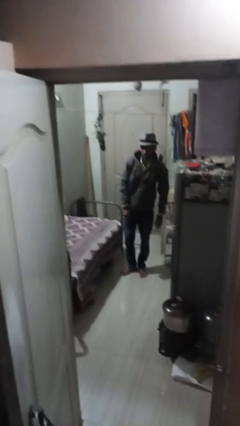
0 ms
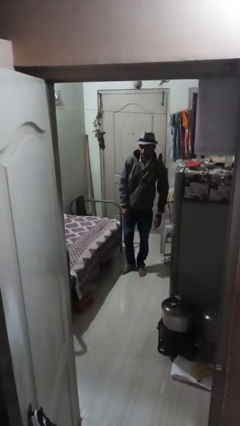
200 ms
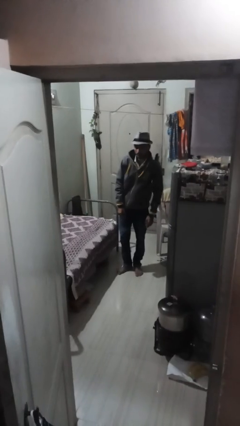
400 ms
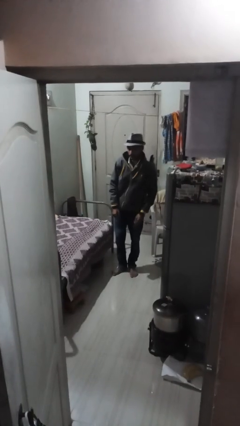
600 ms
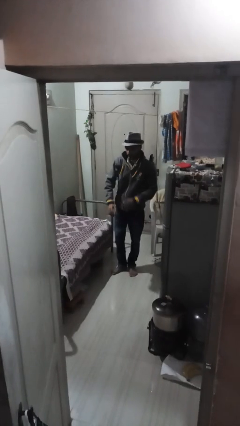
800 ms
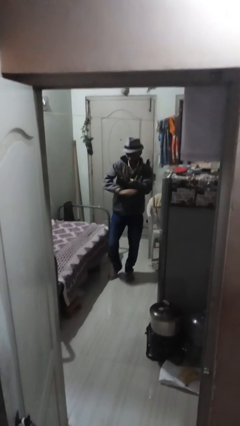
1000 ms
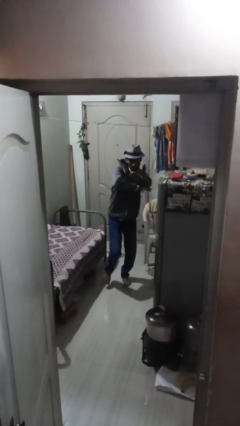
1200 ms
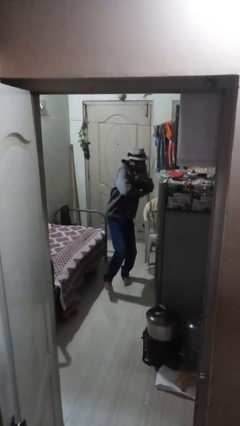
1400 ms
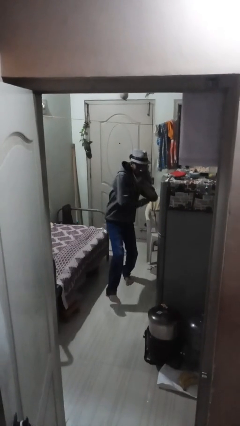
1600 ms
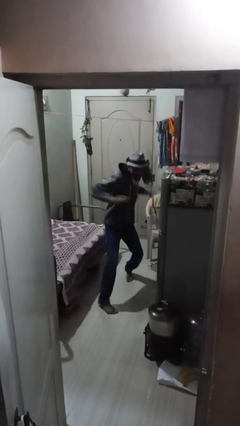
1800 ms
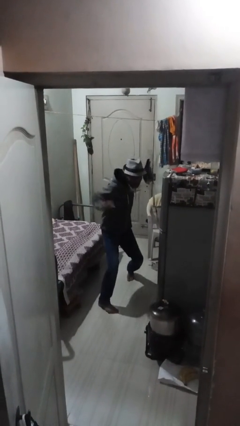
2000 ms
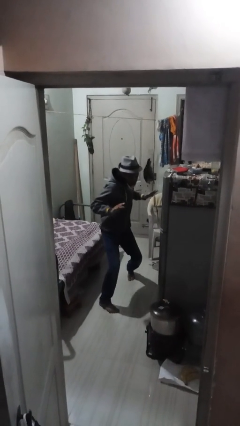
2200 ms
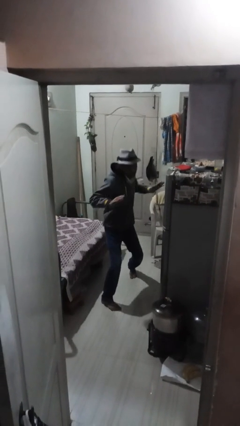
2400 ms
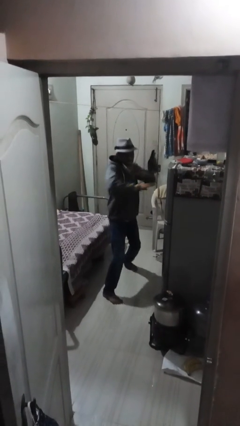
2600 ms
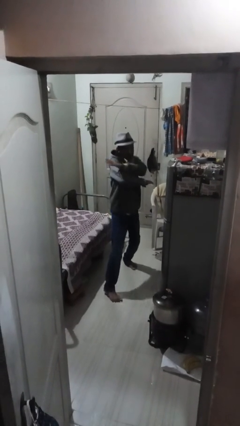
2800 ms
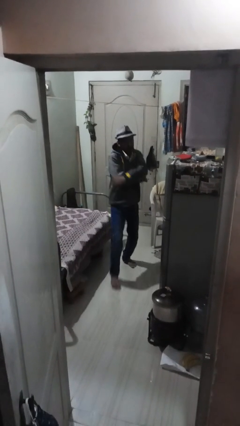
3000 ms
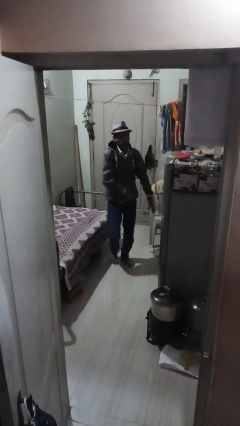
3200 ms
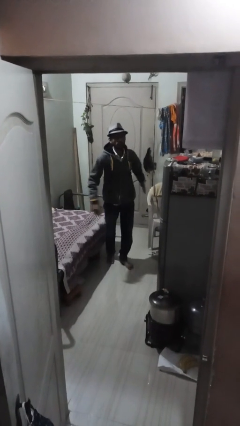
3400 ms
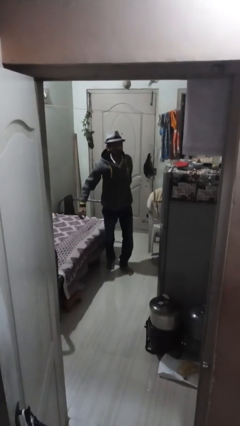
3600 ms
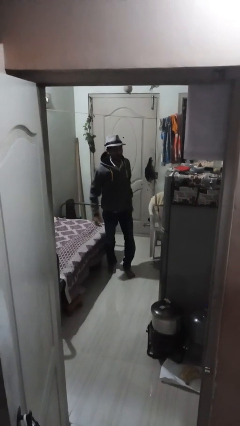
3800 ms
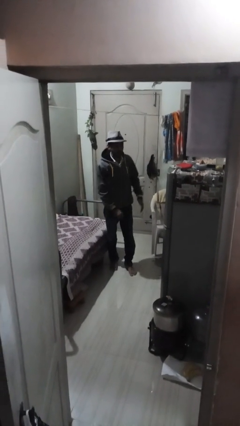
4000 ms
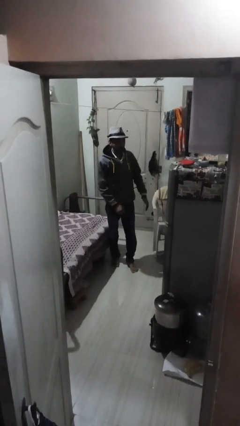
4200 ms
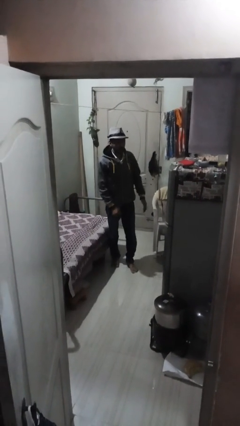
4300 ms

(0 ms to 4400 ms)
person karate chop

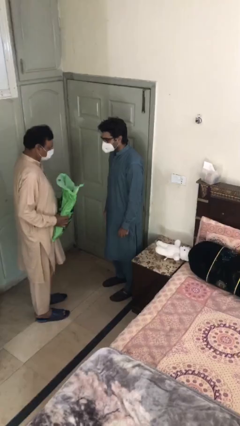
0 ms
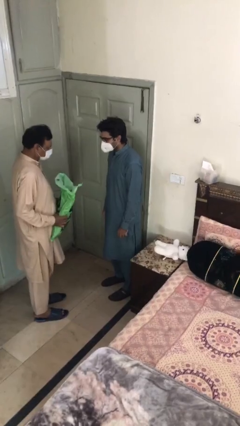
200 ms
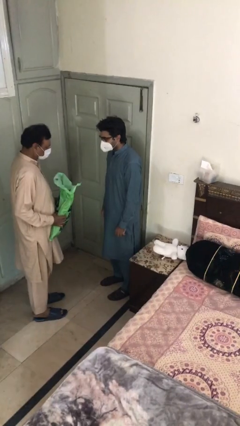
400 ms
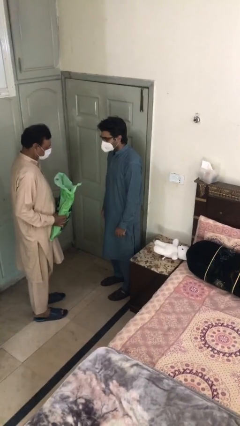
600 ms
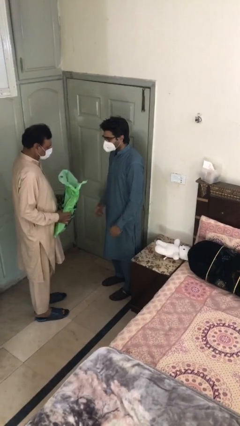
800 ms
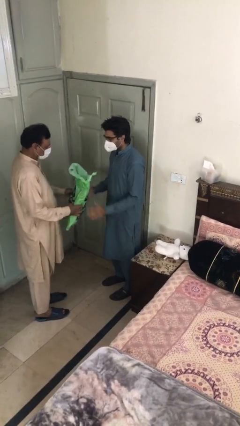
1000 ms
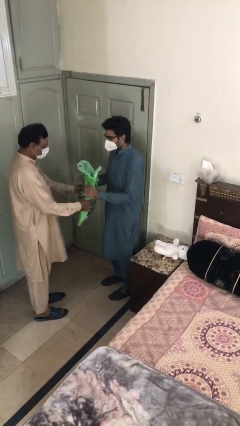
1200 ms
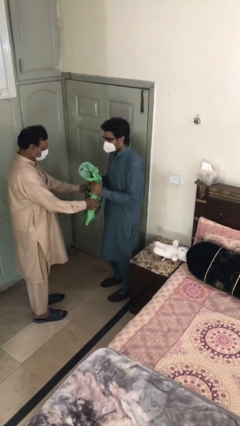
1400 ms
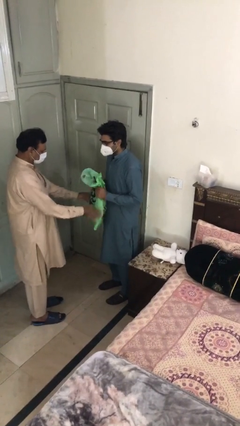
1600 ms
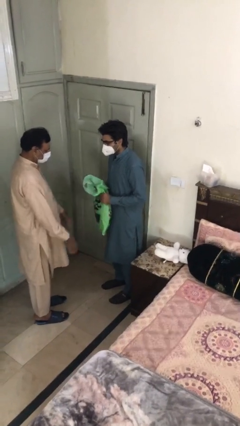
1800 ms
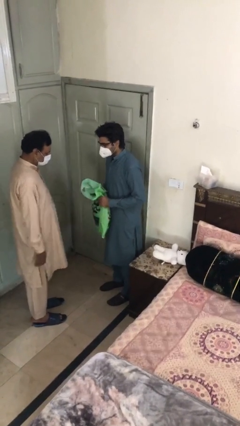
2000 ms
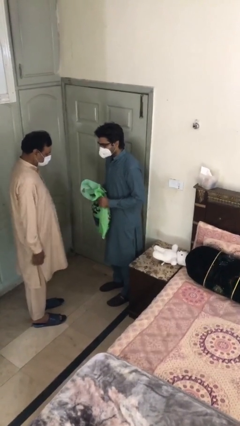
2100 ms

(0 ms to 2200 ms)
person transfers object to person

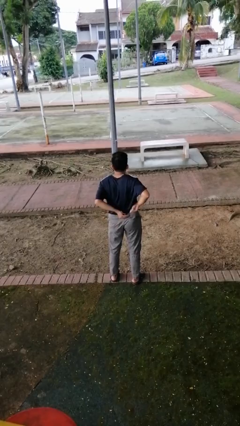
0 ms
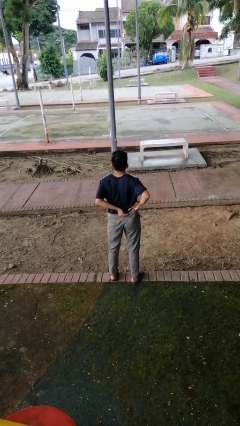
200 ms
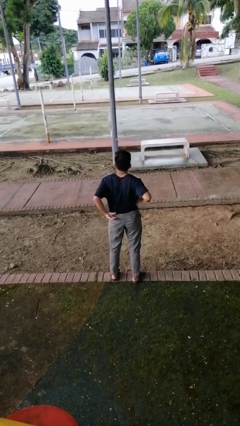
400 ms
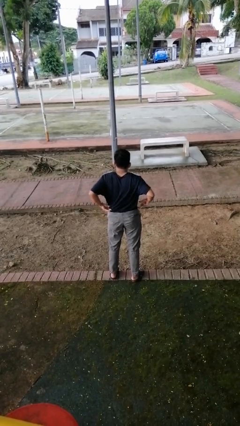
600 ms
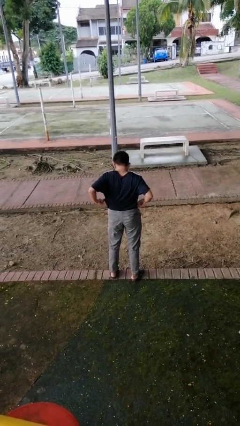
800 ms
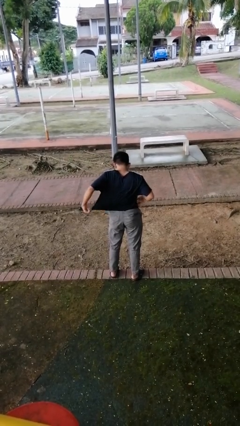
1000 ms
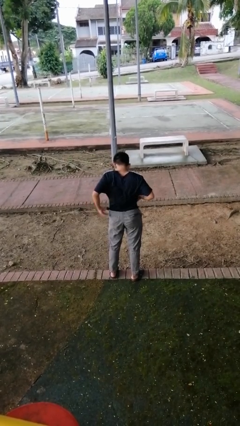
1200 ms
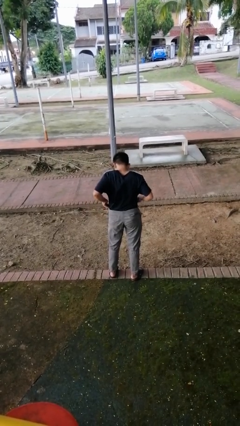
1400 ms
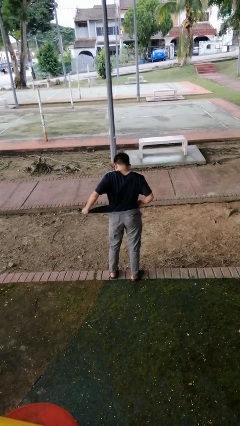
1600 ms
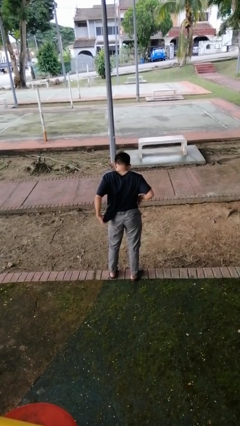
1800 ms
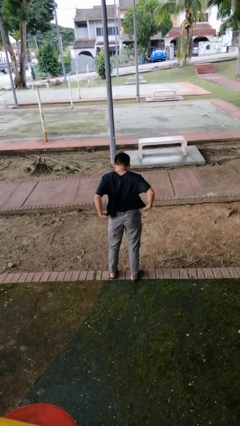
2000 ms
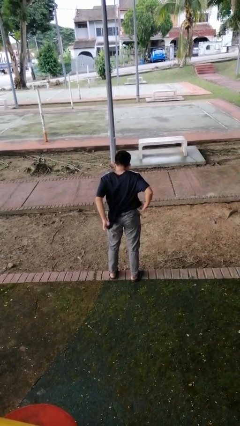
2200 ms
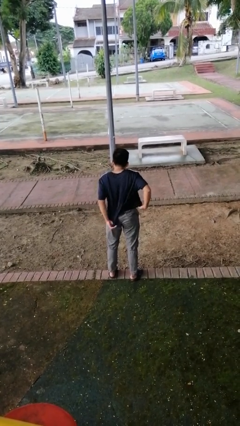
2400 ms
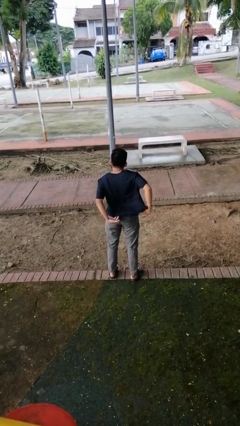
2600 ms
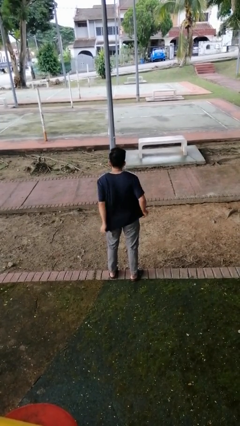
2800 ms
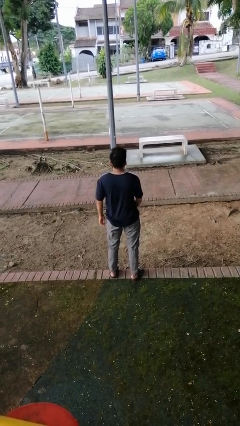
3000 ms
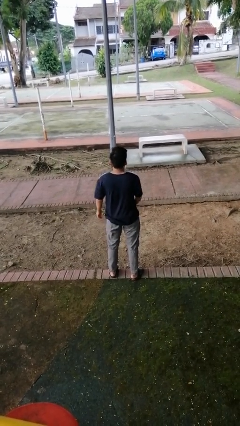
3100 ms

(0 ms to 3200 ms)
person untucks shirt

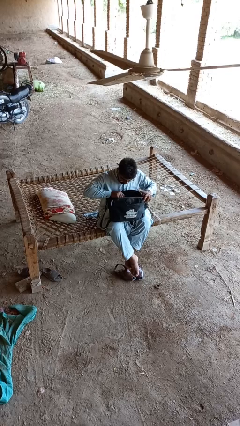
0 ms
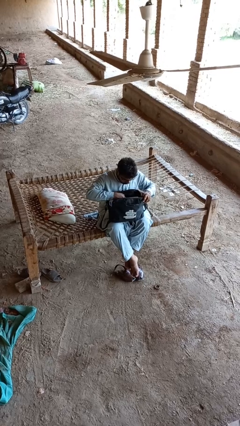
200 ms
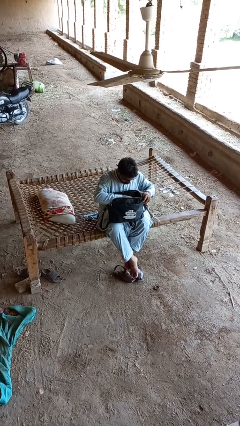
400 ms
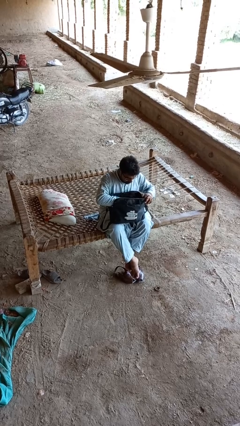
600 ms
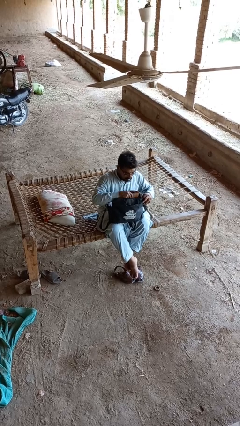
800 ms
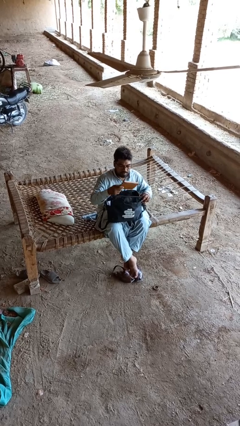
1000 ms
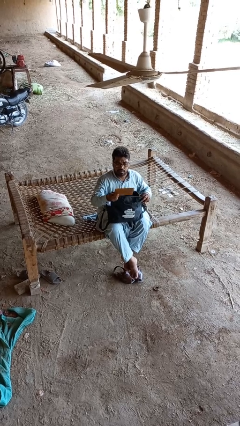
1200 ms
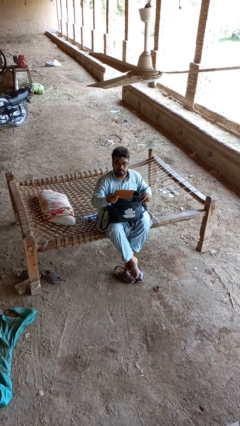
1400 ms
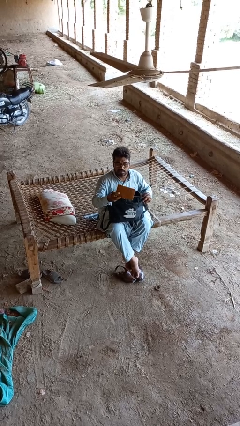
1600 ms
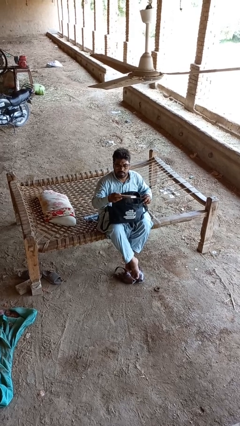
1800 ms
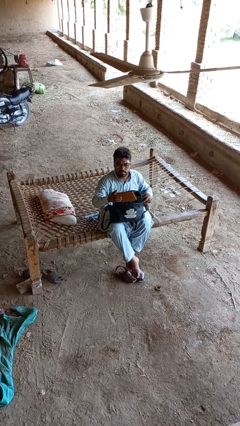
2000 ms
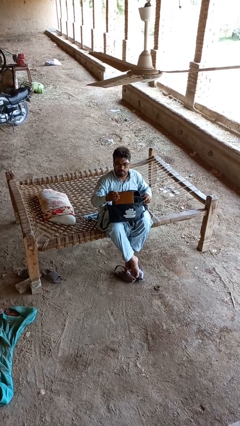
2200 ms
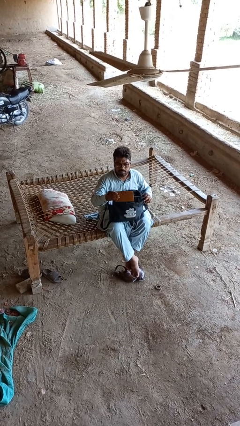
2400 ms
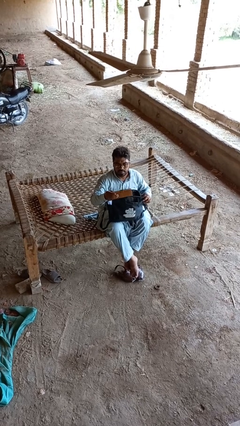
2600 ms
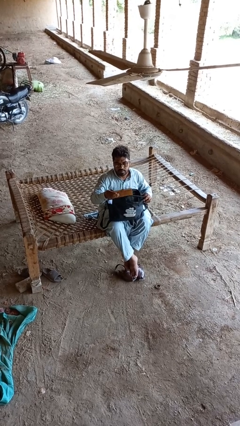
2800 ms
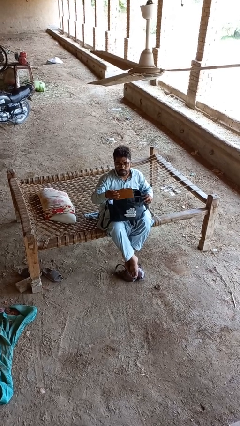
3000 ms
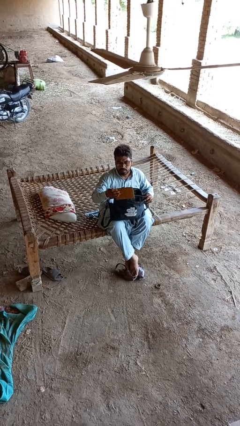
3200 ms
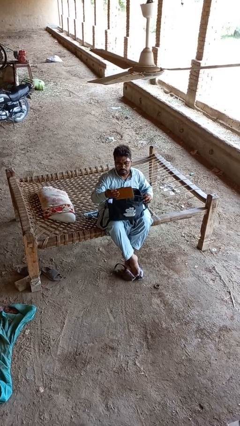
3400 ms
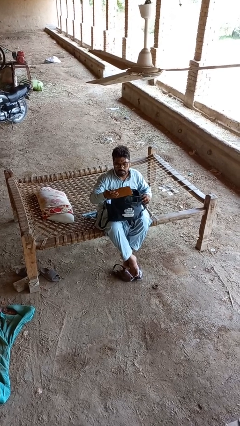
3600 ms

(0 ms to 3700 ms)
person takes object from backpack

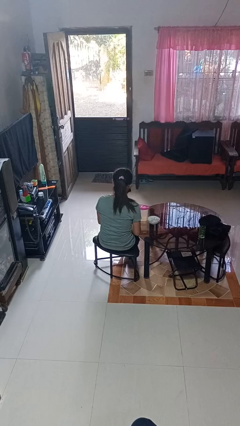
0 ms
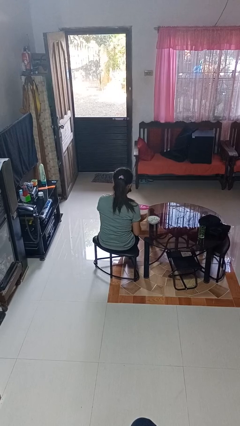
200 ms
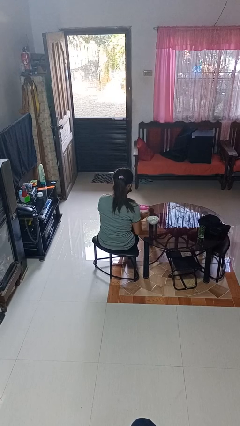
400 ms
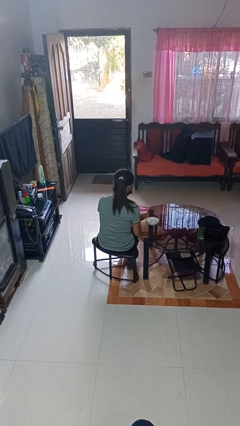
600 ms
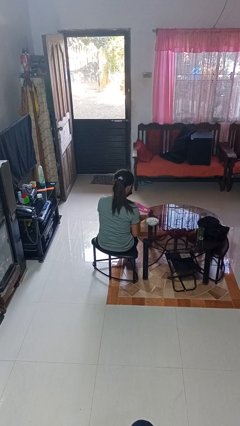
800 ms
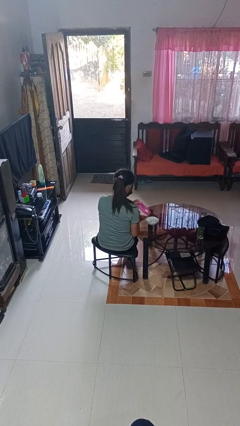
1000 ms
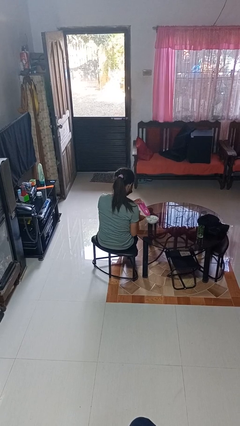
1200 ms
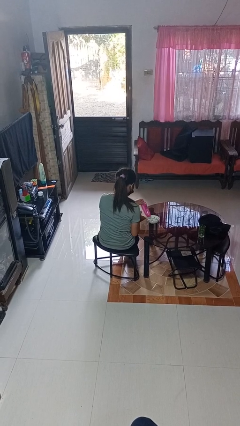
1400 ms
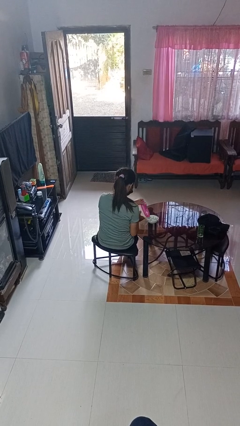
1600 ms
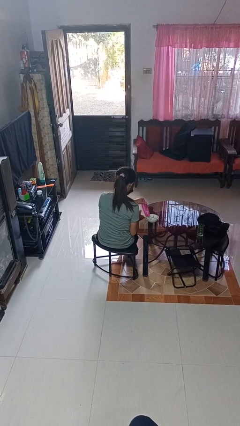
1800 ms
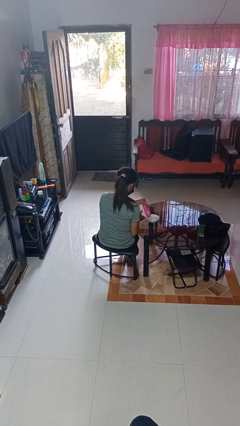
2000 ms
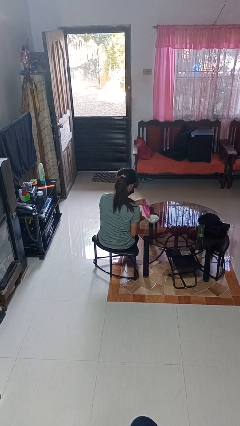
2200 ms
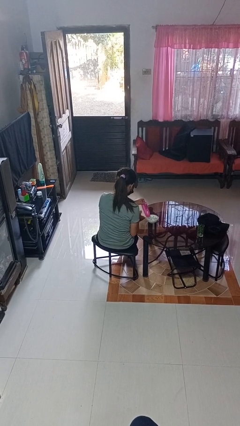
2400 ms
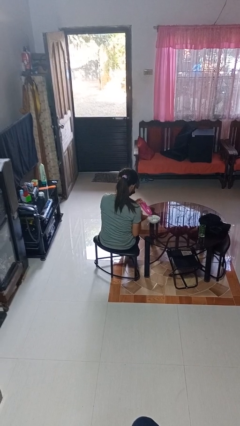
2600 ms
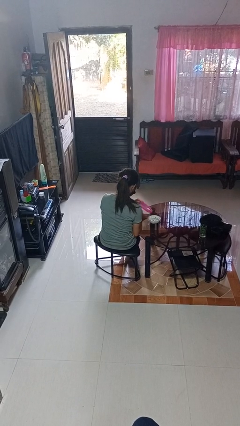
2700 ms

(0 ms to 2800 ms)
person pours into bowl

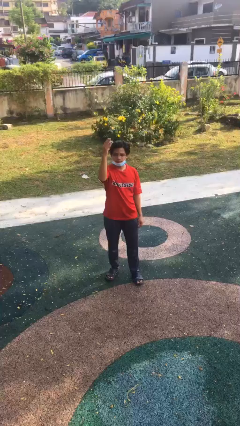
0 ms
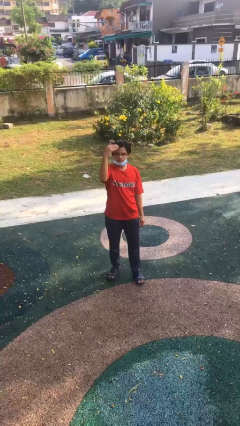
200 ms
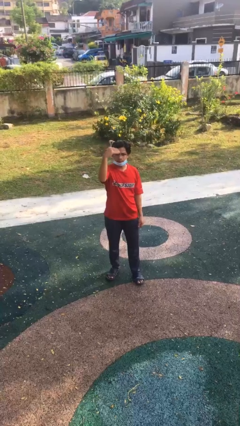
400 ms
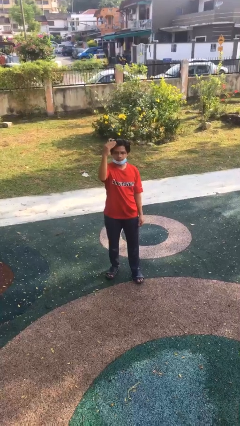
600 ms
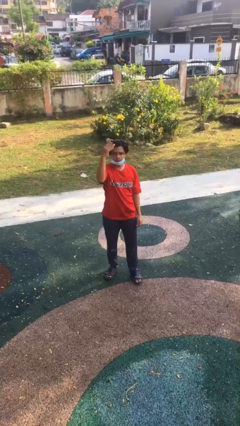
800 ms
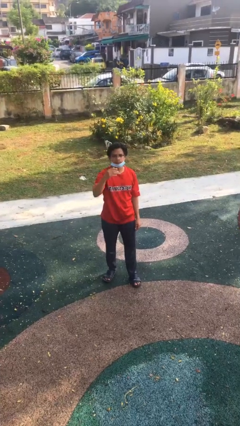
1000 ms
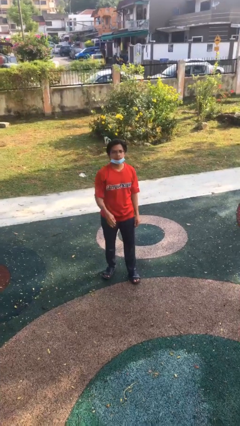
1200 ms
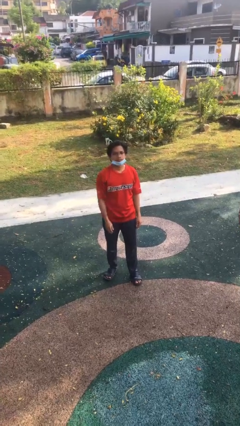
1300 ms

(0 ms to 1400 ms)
person gestures come here
